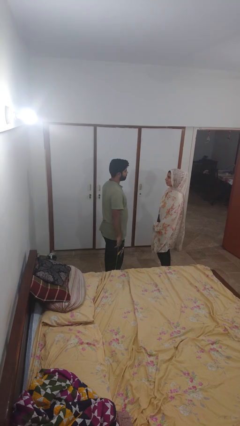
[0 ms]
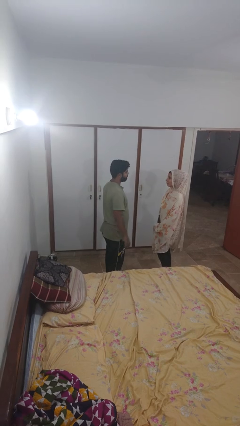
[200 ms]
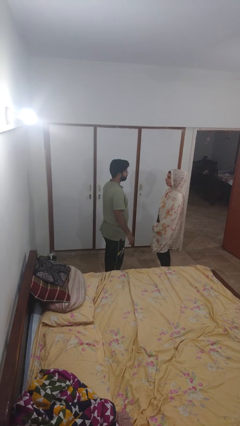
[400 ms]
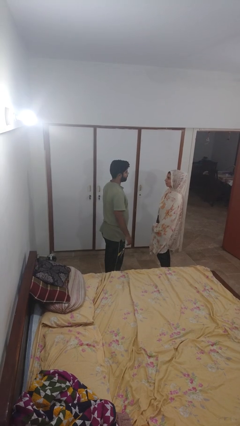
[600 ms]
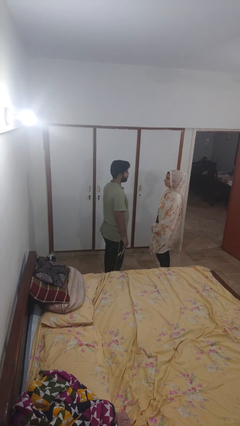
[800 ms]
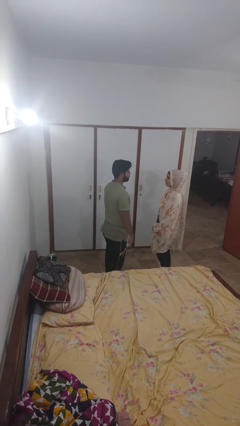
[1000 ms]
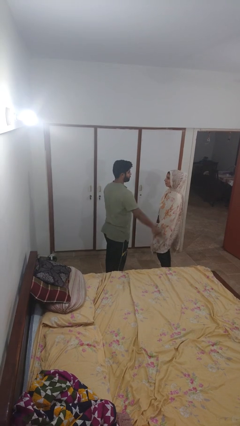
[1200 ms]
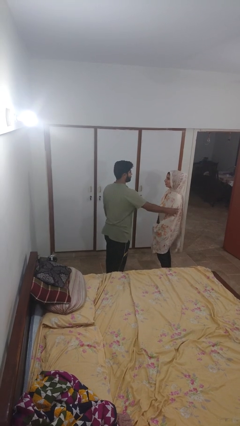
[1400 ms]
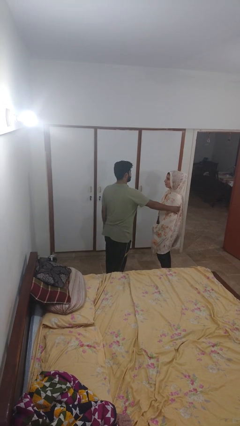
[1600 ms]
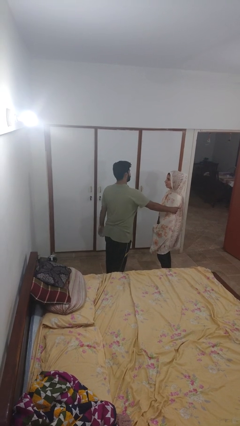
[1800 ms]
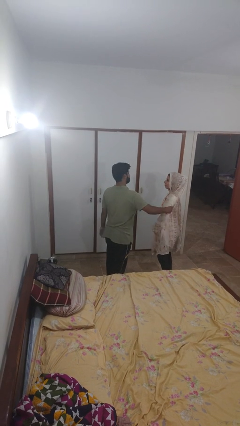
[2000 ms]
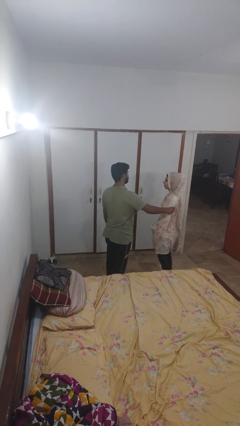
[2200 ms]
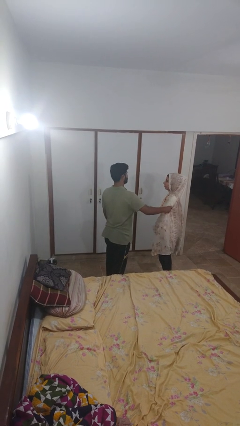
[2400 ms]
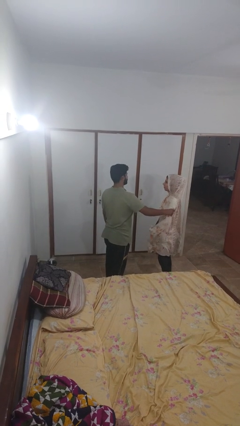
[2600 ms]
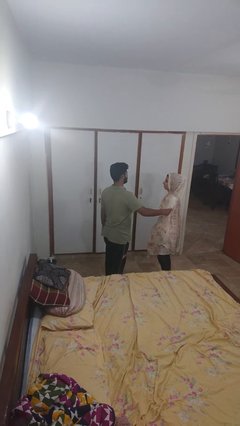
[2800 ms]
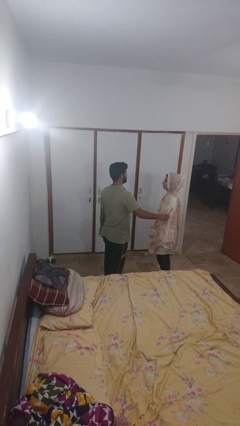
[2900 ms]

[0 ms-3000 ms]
person grabs person by bicep

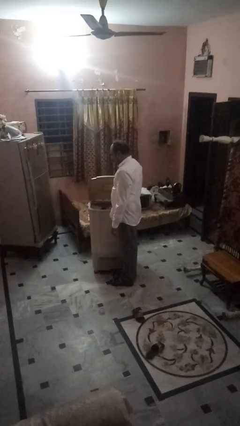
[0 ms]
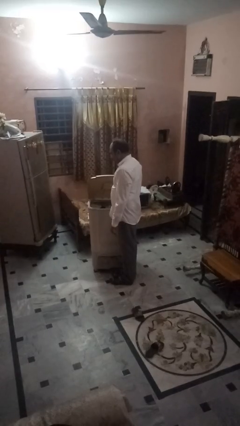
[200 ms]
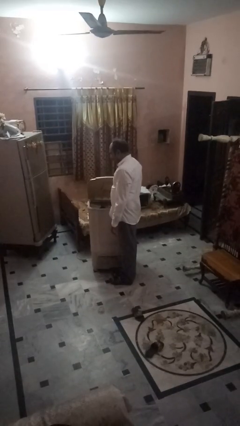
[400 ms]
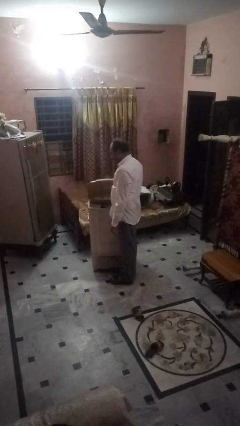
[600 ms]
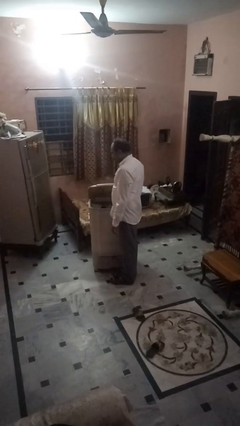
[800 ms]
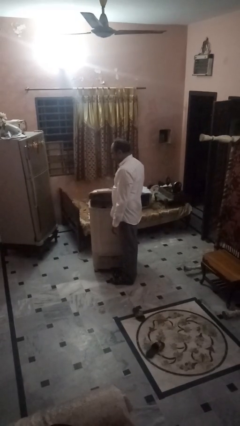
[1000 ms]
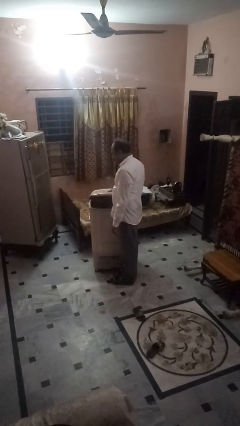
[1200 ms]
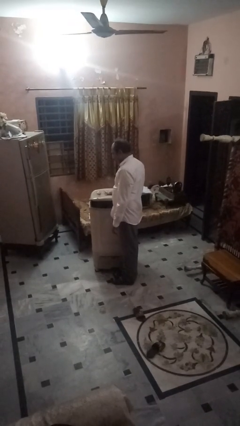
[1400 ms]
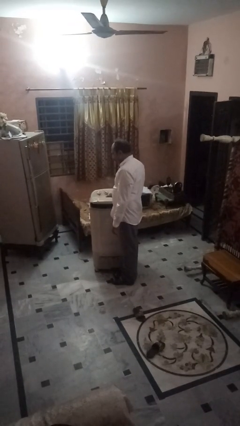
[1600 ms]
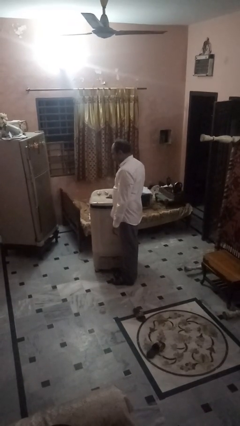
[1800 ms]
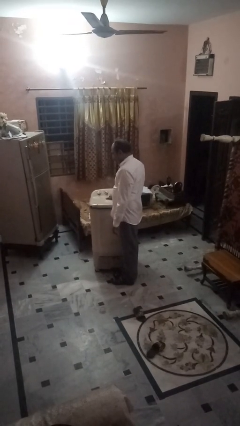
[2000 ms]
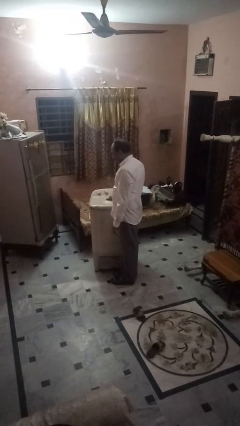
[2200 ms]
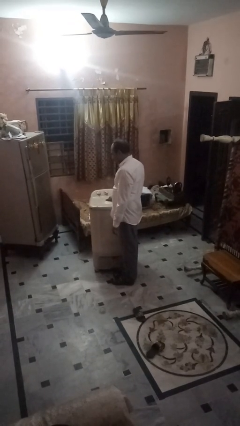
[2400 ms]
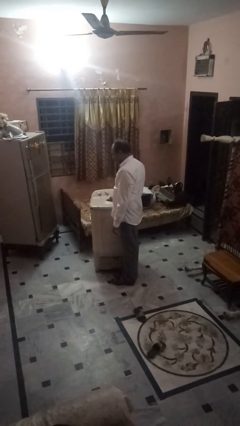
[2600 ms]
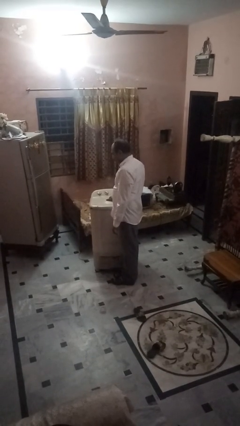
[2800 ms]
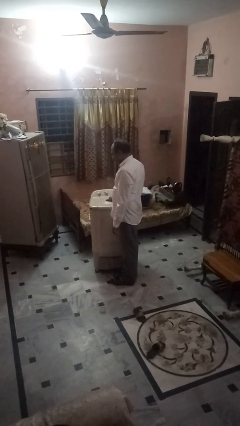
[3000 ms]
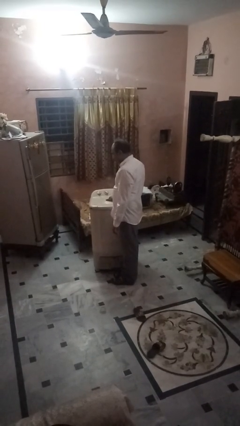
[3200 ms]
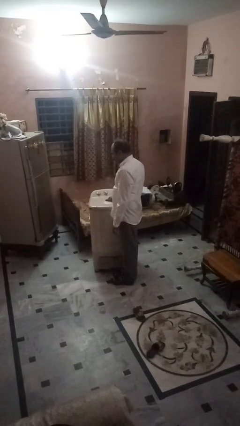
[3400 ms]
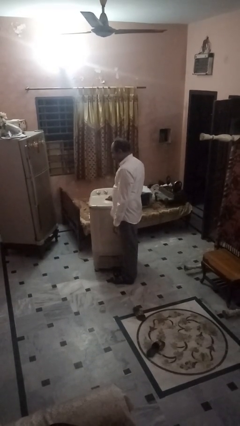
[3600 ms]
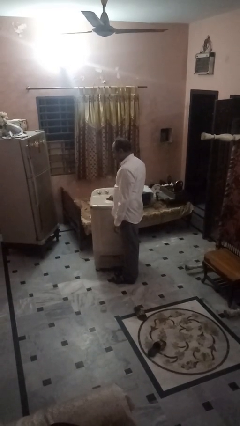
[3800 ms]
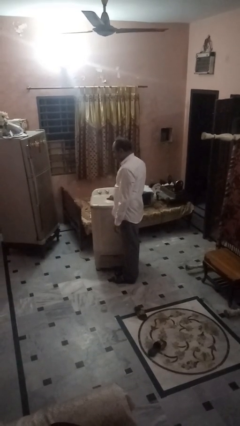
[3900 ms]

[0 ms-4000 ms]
person closes clothes washer

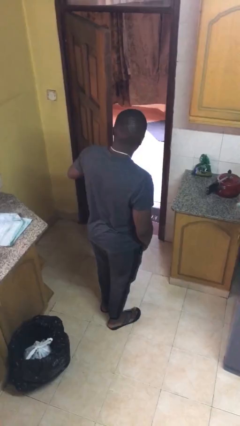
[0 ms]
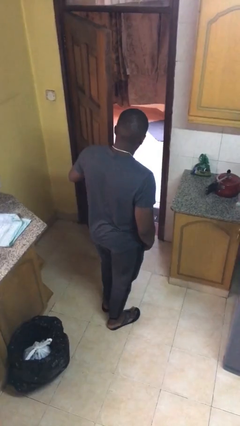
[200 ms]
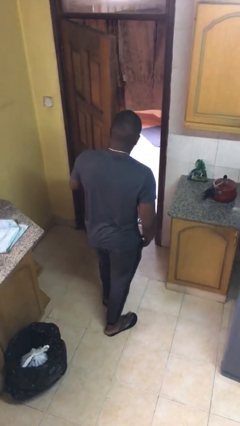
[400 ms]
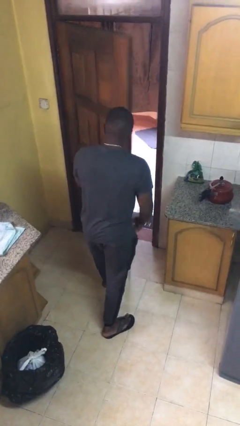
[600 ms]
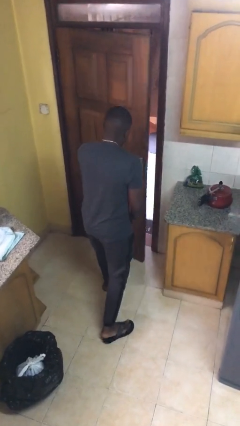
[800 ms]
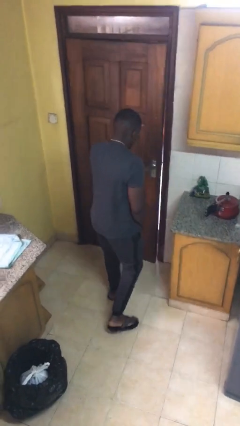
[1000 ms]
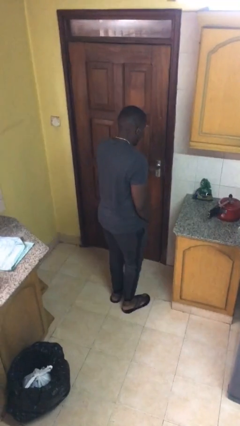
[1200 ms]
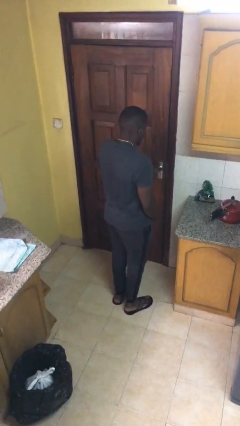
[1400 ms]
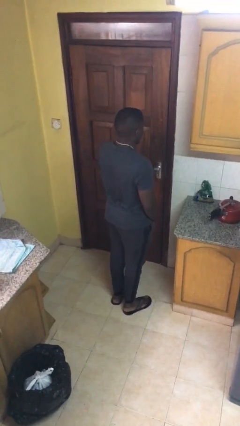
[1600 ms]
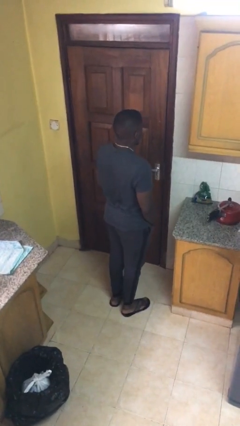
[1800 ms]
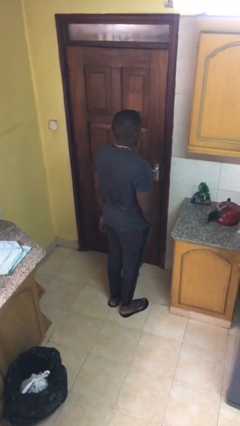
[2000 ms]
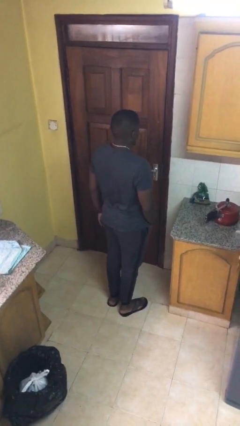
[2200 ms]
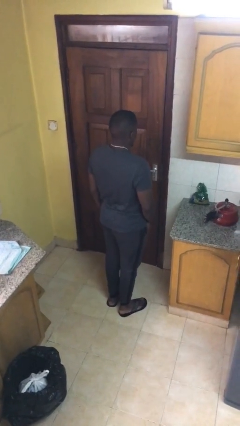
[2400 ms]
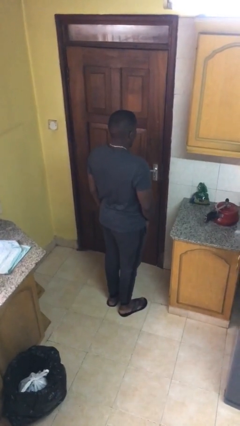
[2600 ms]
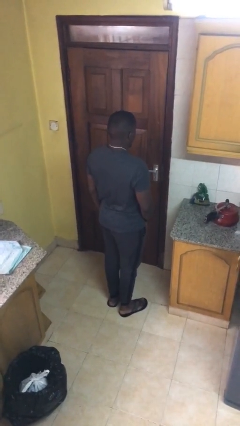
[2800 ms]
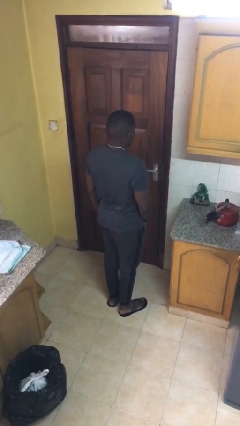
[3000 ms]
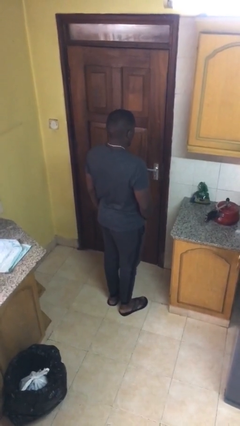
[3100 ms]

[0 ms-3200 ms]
person closes facility door

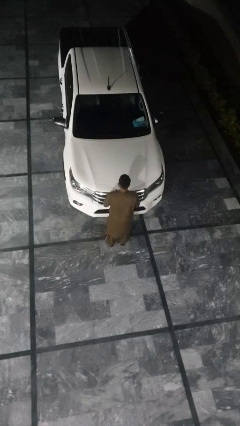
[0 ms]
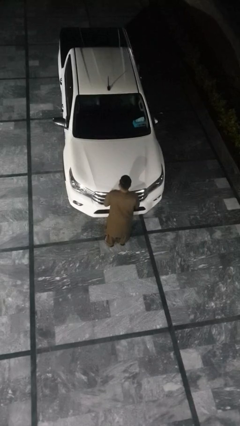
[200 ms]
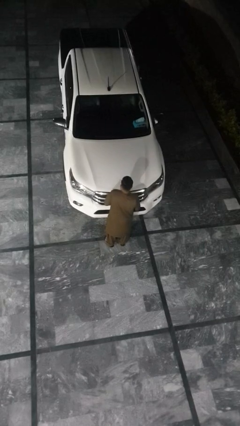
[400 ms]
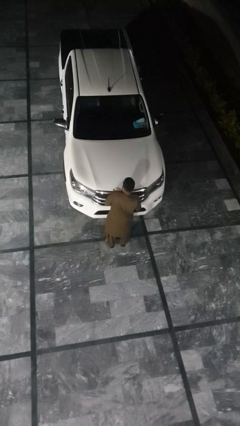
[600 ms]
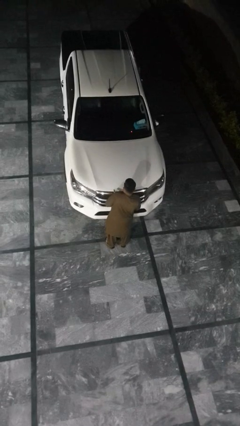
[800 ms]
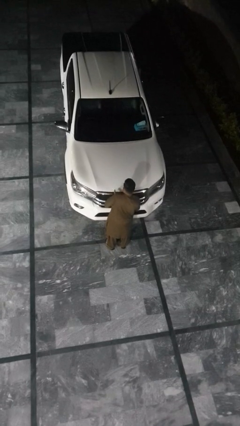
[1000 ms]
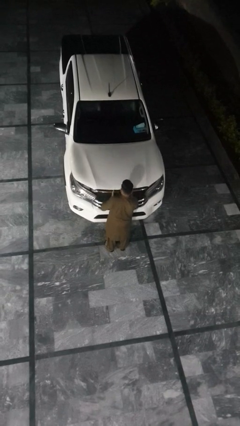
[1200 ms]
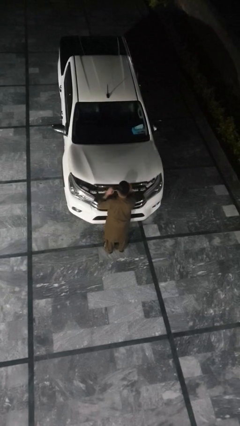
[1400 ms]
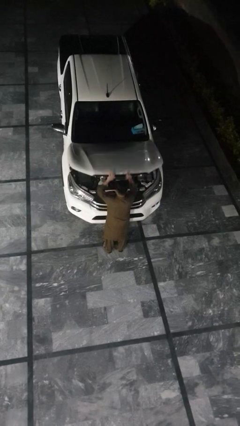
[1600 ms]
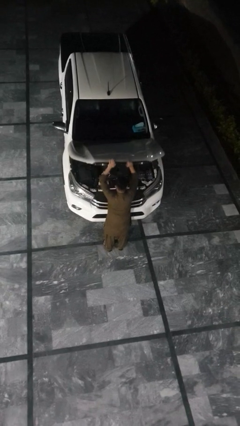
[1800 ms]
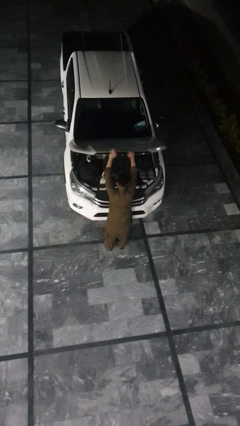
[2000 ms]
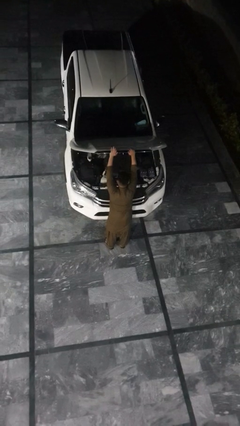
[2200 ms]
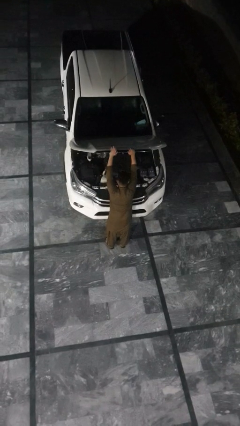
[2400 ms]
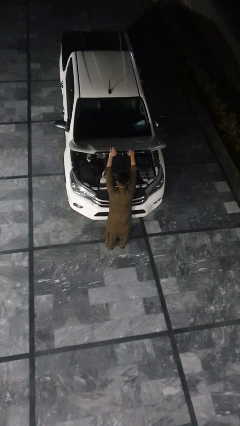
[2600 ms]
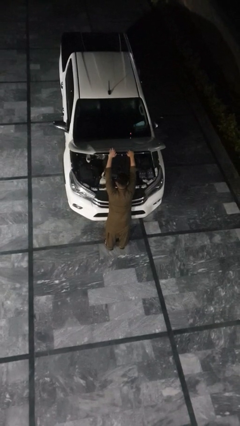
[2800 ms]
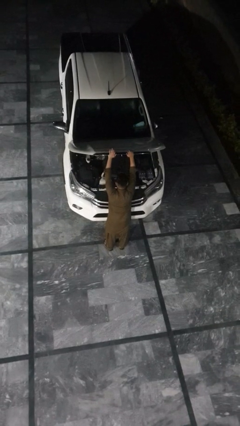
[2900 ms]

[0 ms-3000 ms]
person opens car hood

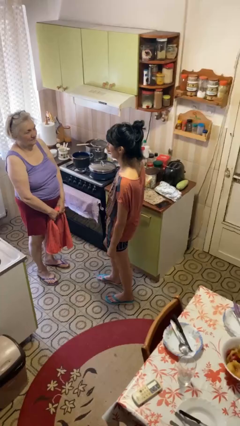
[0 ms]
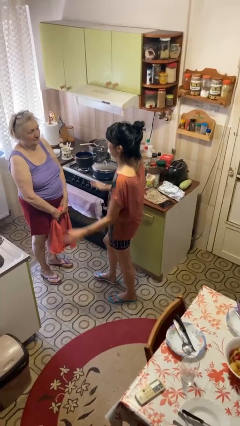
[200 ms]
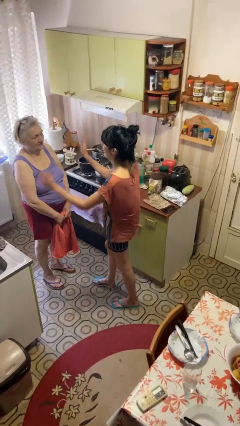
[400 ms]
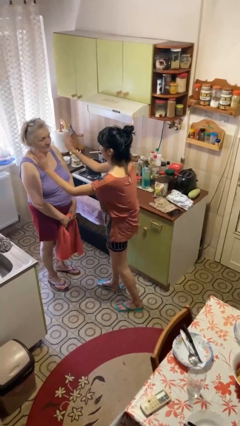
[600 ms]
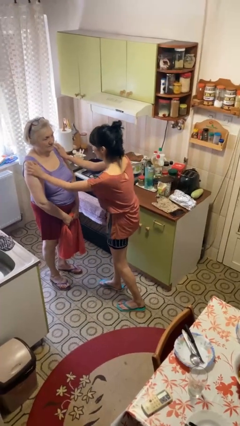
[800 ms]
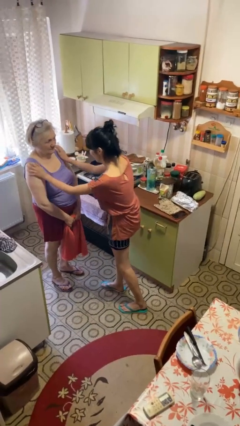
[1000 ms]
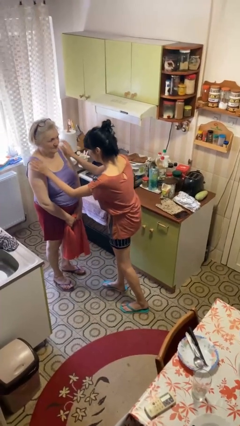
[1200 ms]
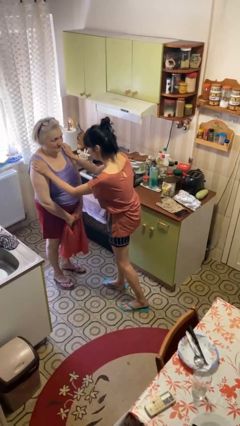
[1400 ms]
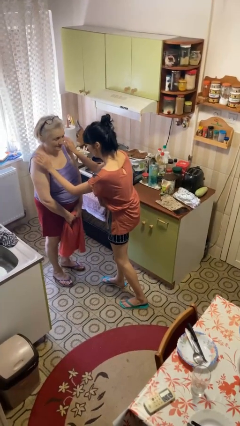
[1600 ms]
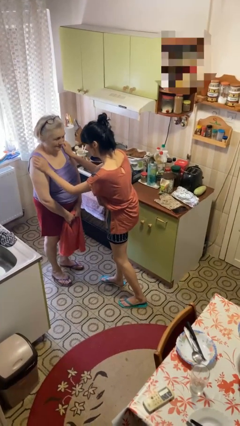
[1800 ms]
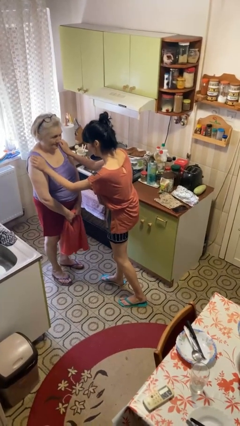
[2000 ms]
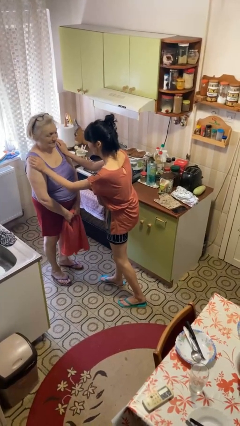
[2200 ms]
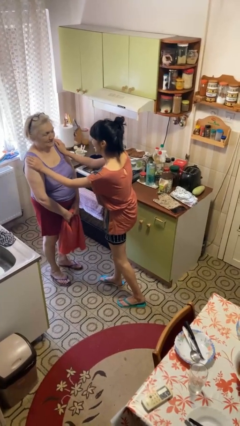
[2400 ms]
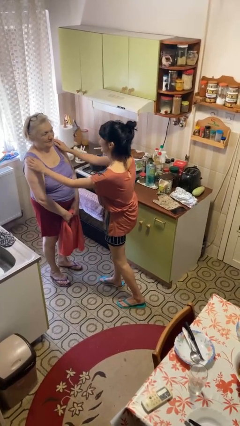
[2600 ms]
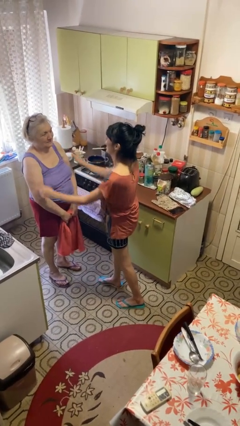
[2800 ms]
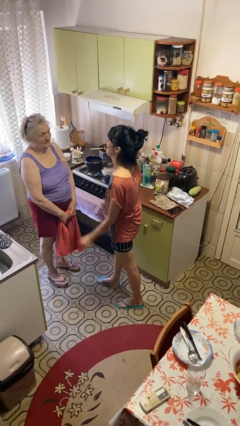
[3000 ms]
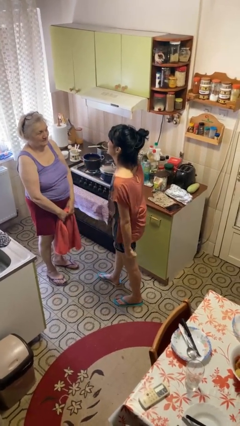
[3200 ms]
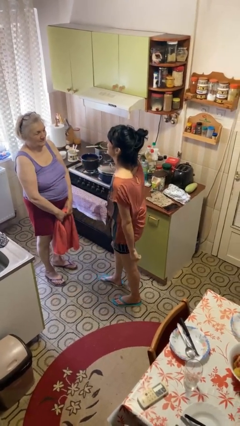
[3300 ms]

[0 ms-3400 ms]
person pounds shoulders of person
